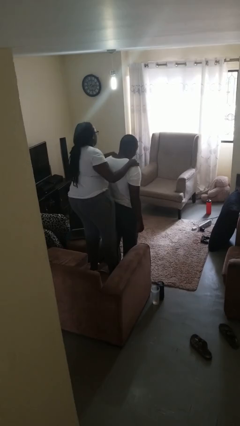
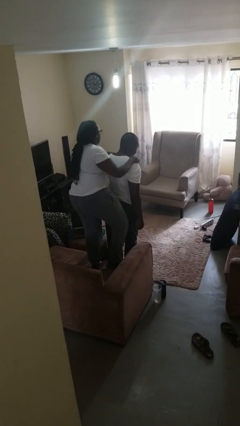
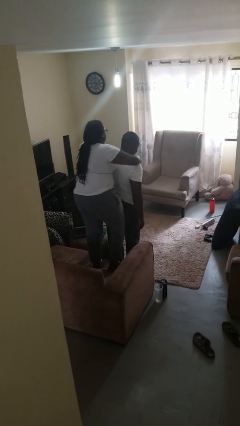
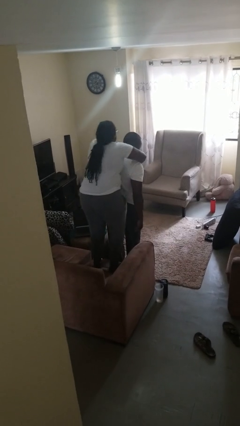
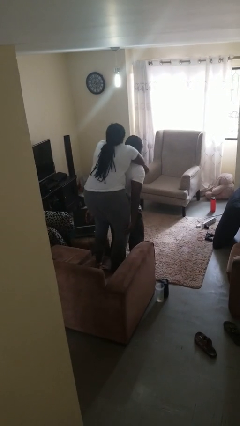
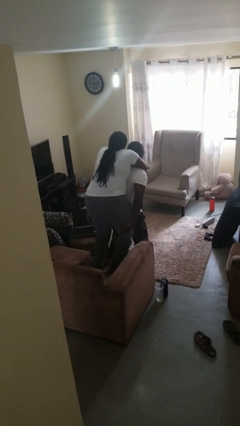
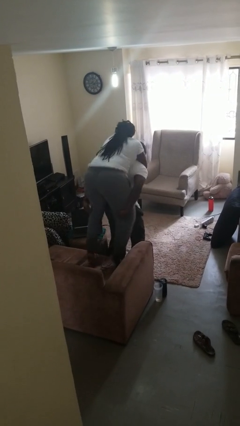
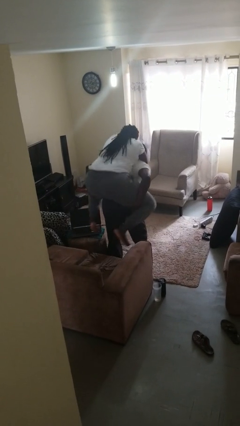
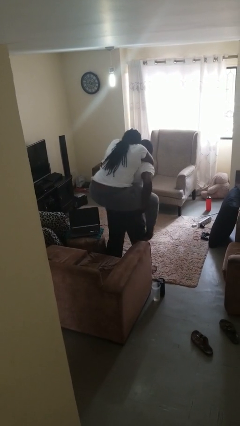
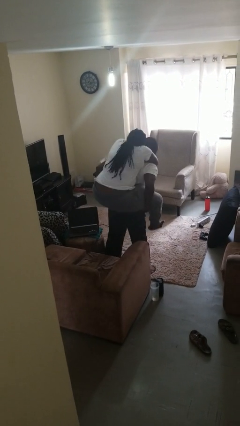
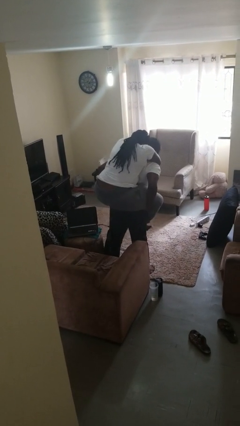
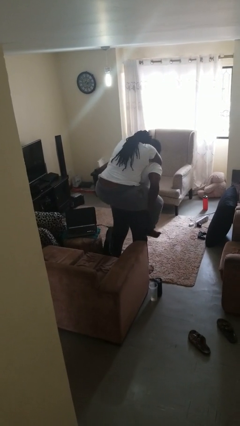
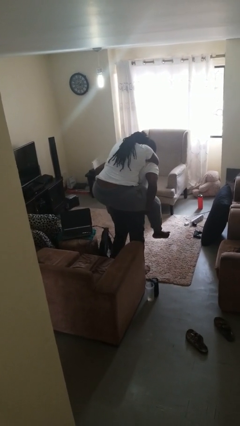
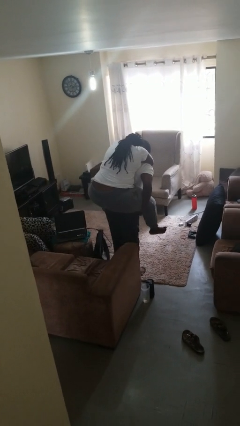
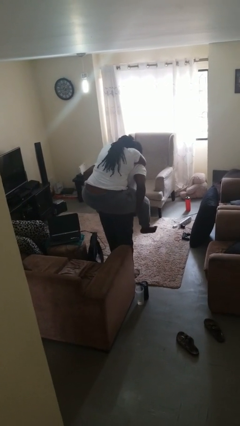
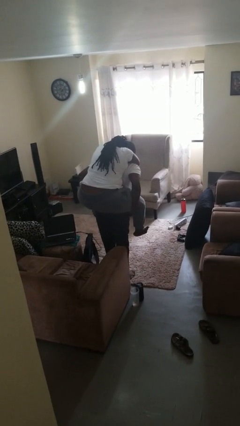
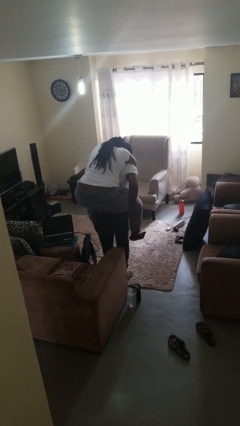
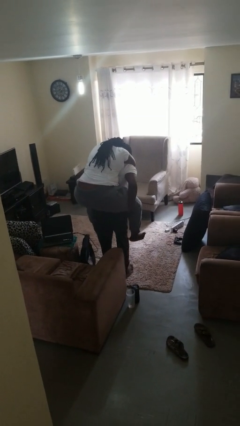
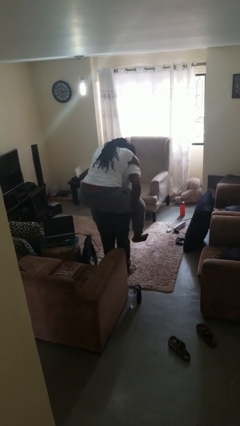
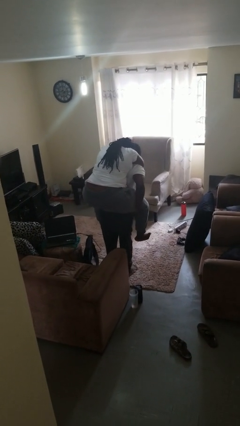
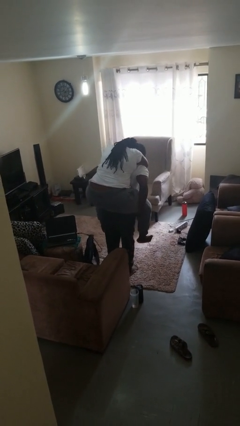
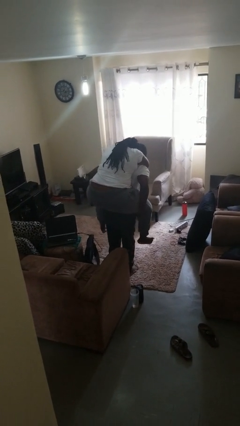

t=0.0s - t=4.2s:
person carries person on back

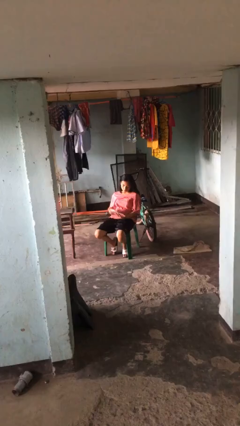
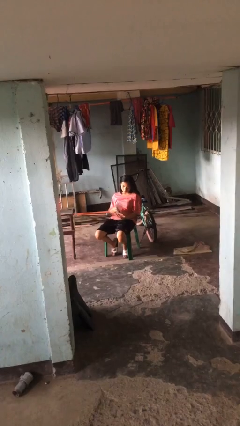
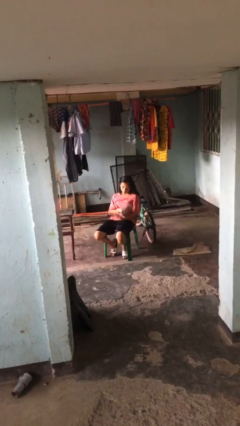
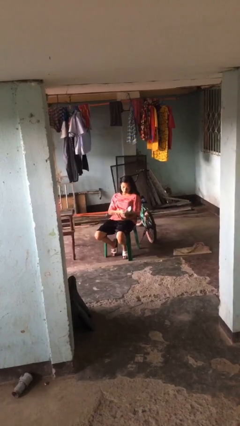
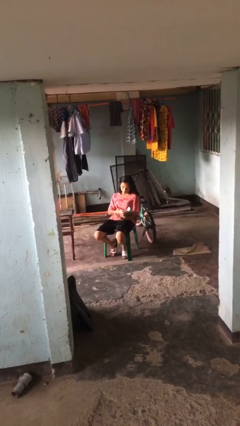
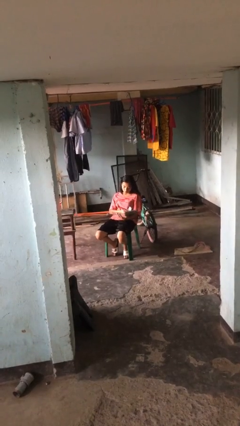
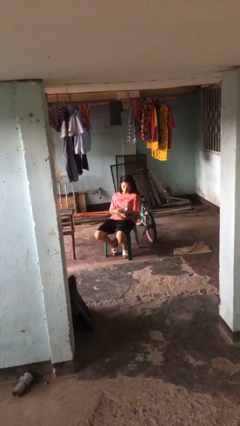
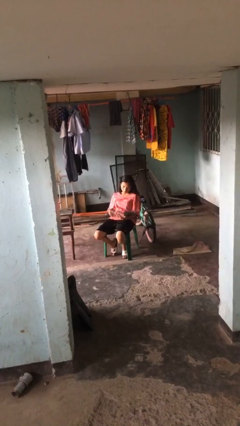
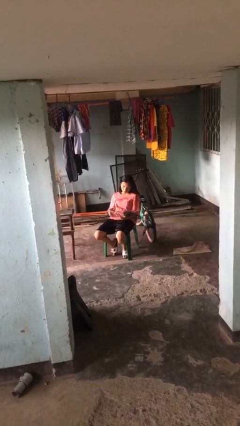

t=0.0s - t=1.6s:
person reads document

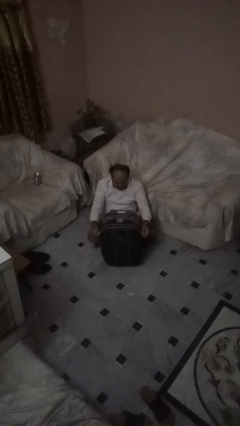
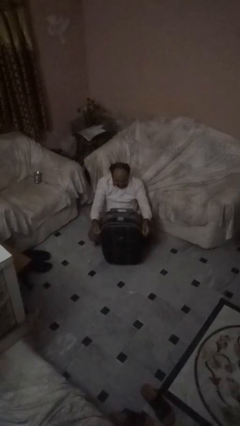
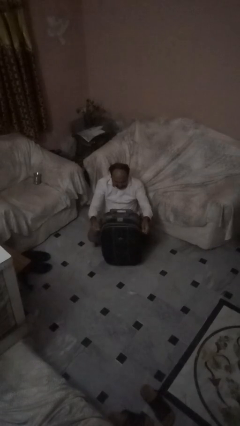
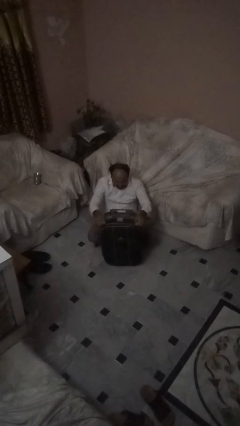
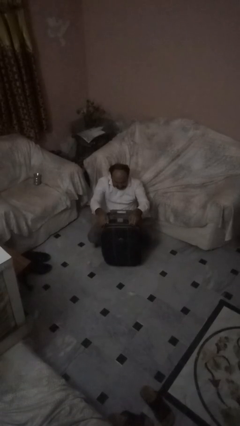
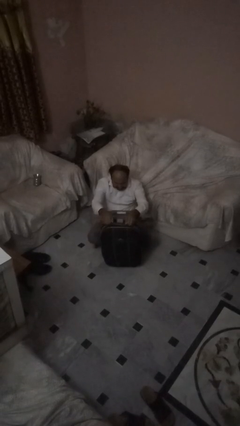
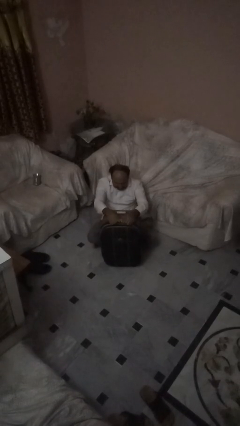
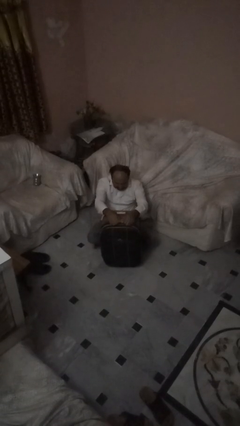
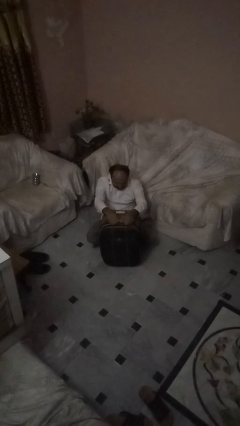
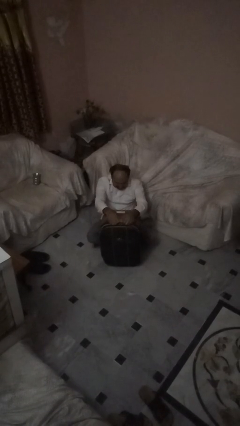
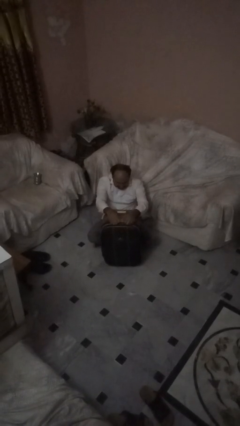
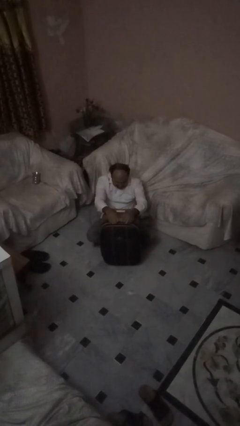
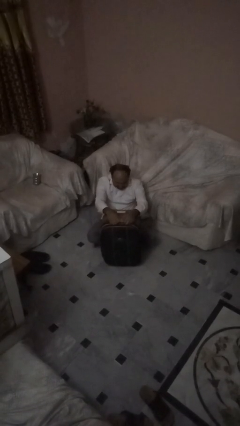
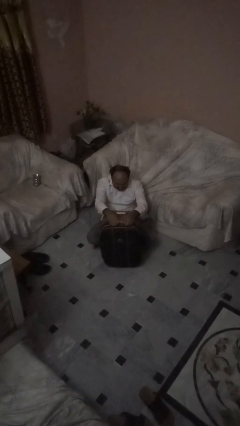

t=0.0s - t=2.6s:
person closes suitcase

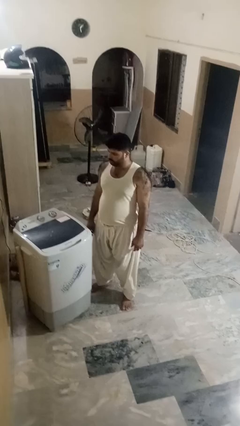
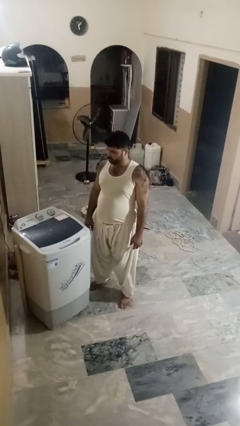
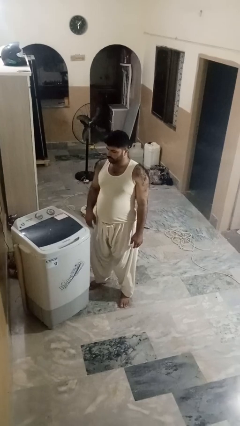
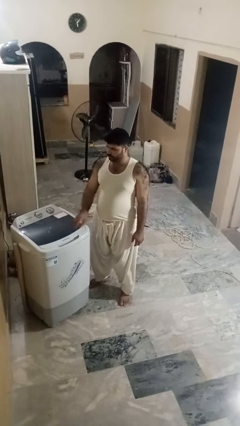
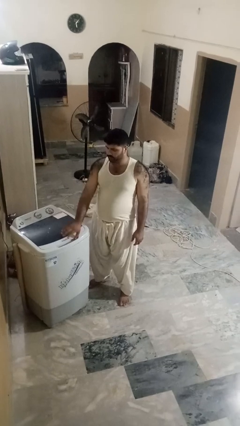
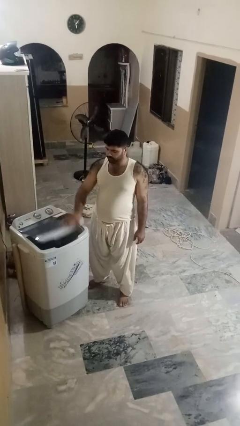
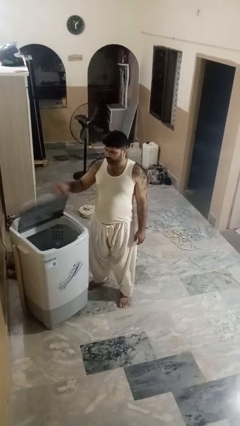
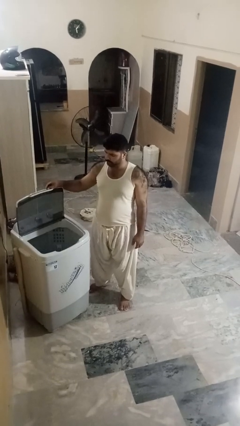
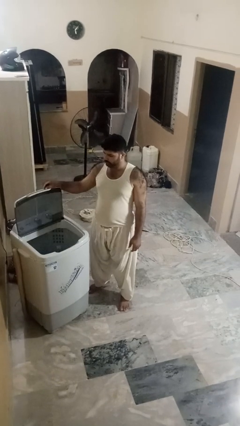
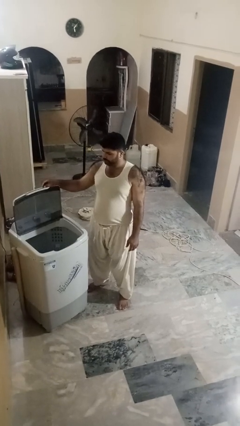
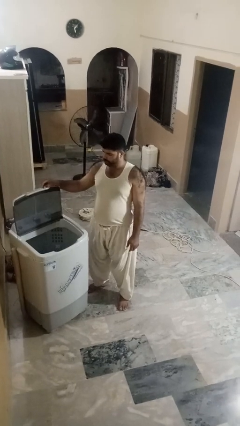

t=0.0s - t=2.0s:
person opens clothes washer

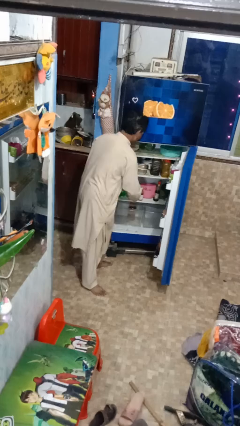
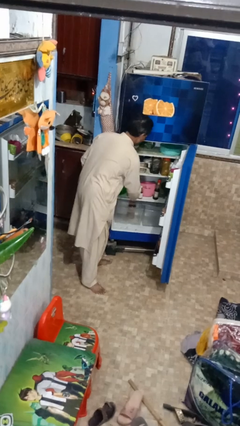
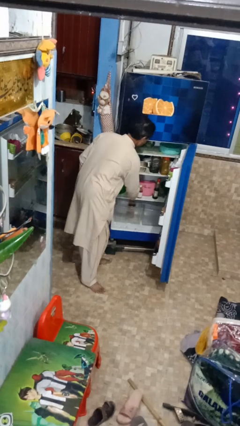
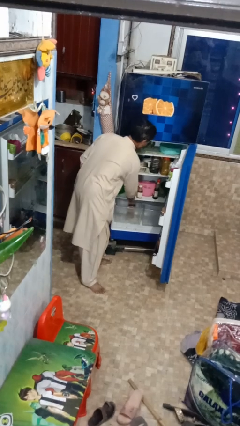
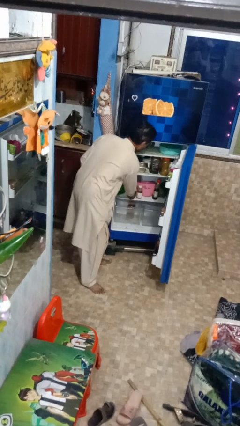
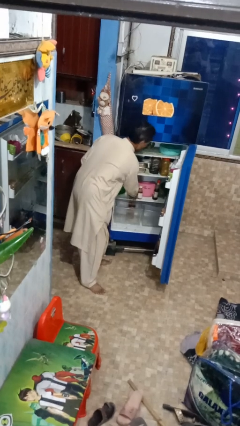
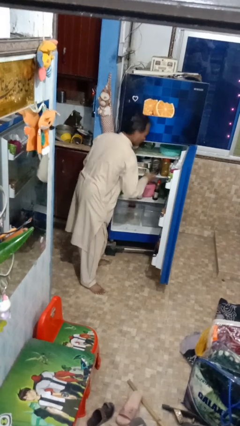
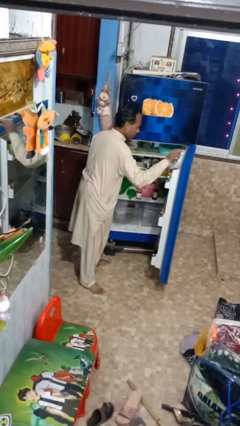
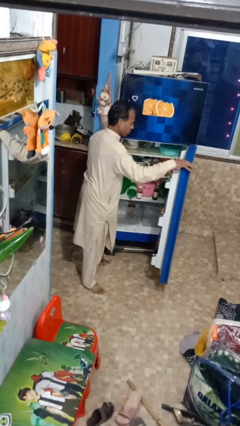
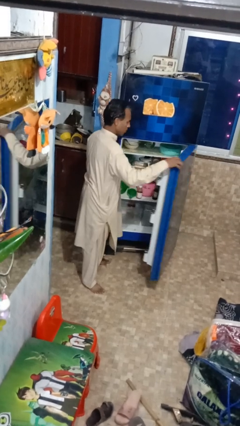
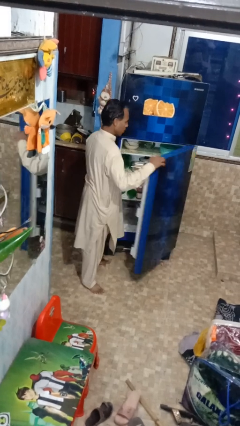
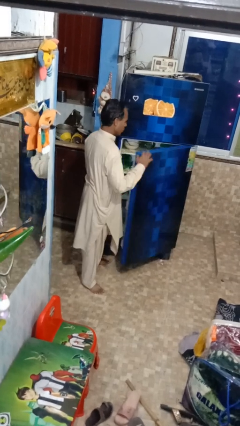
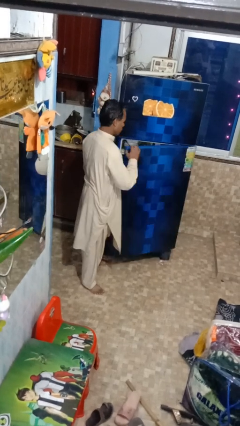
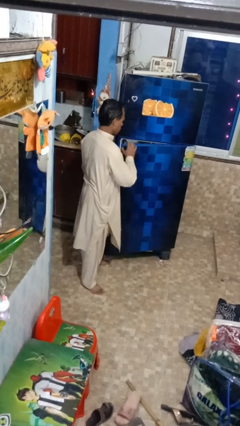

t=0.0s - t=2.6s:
person takes object from refrigerator

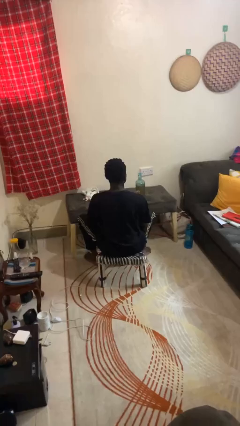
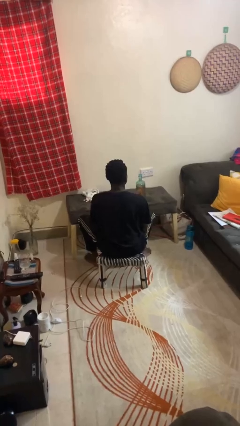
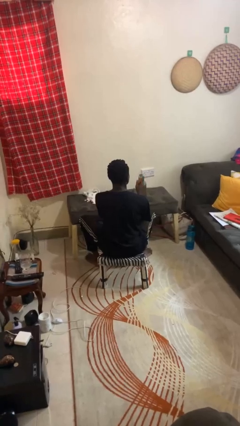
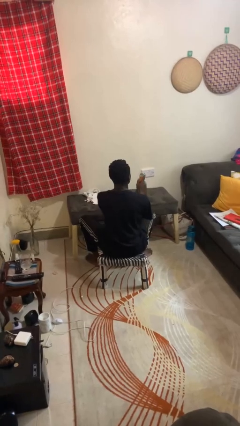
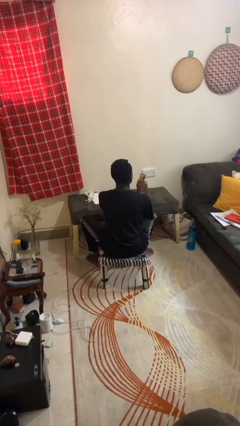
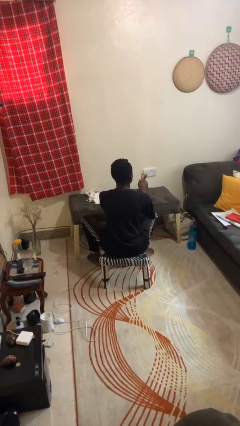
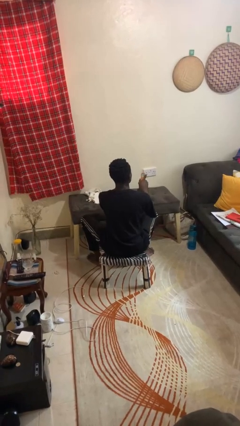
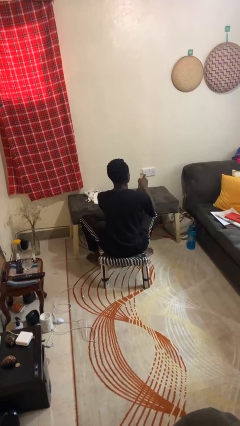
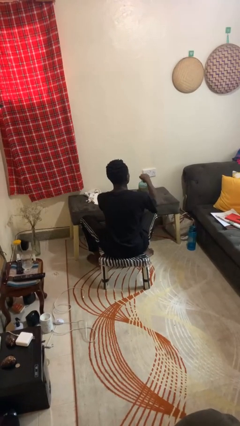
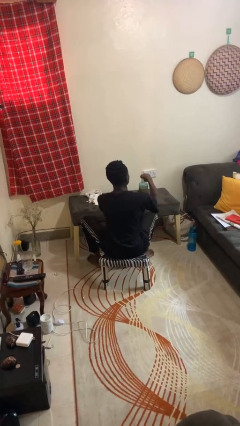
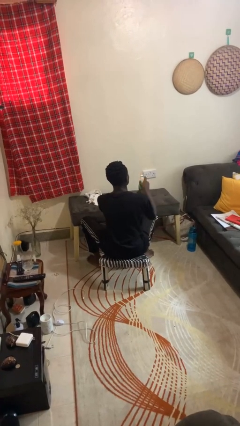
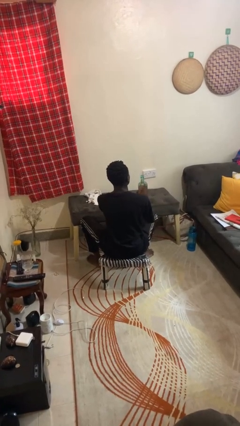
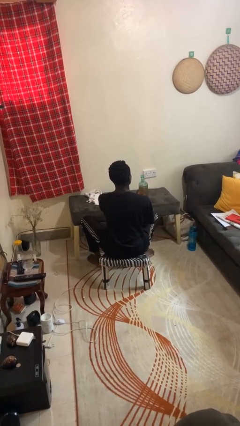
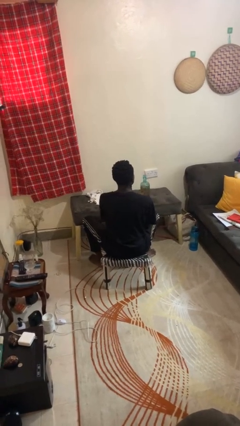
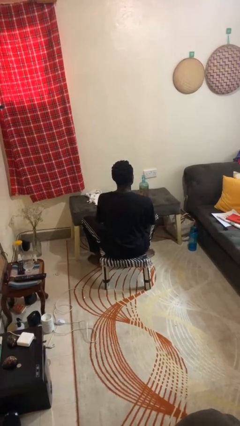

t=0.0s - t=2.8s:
person opens can with can opener

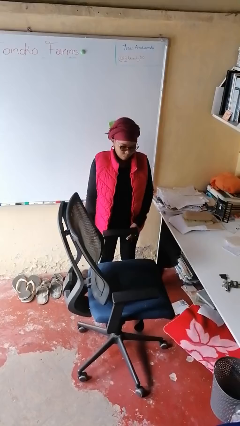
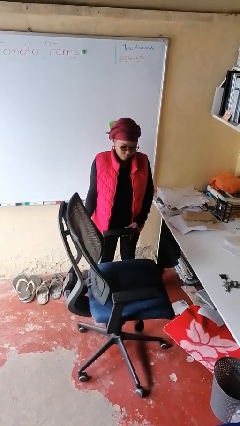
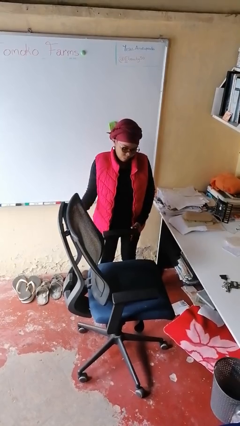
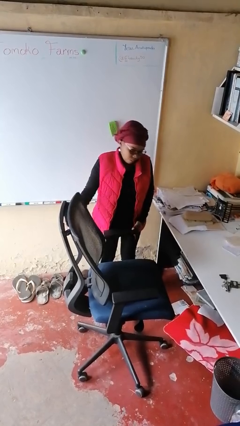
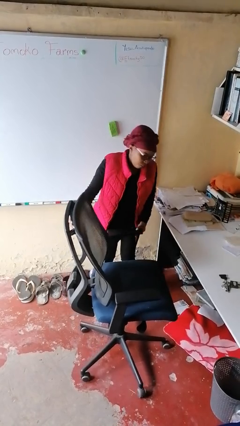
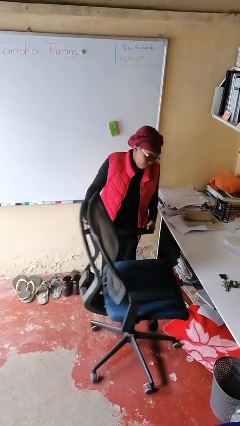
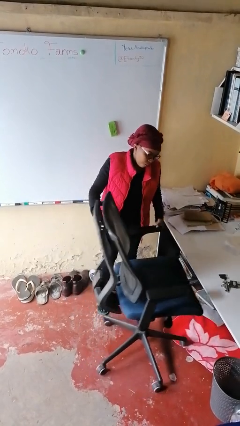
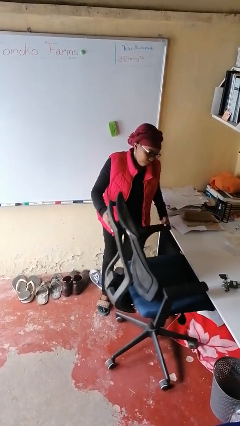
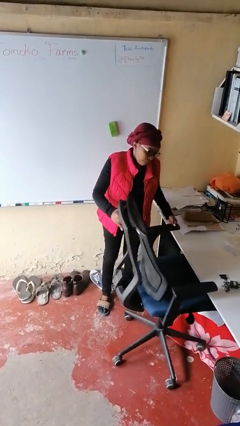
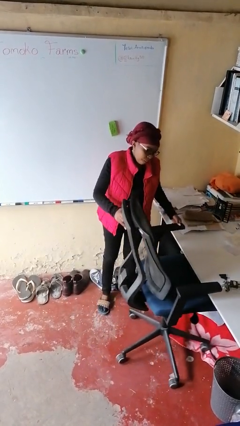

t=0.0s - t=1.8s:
person pushes in chair
